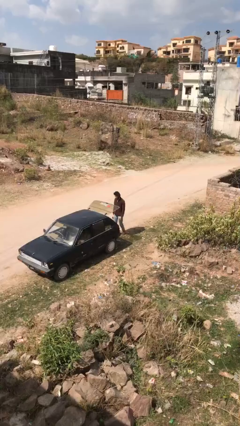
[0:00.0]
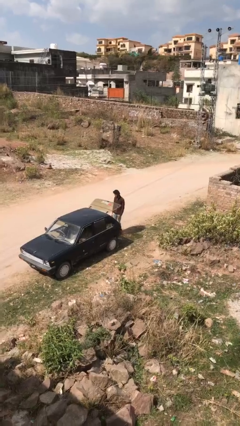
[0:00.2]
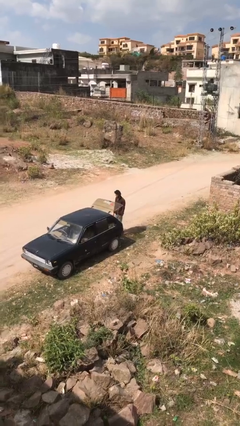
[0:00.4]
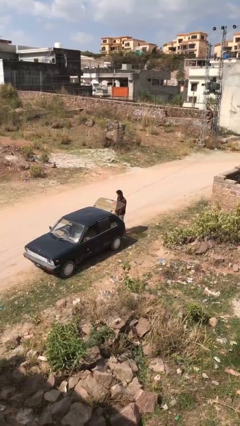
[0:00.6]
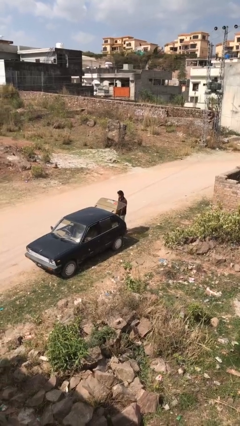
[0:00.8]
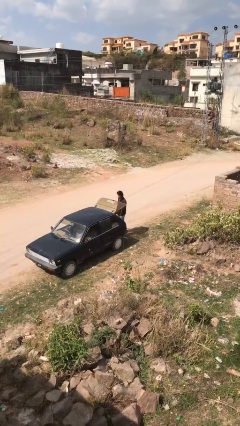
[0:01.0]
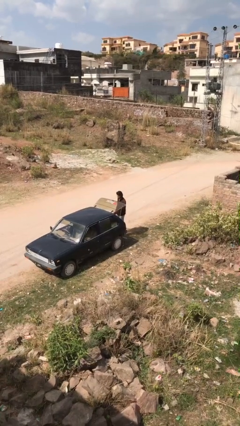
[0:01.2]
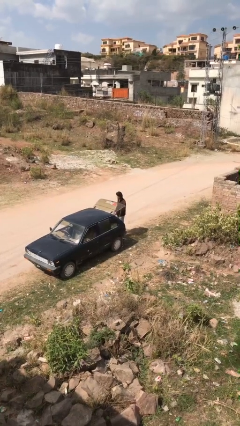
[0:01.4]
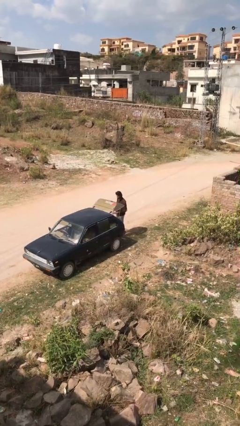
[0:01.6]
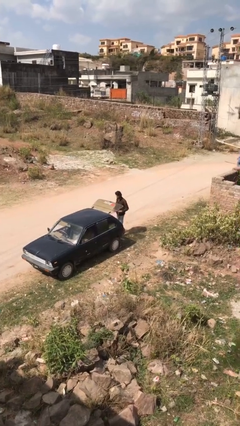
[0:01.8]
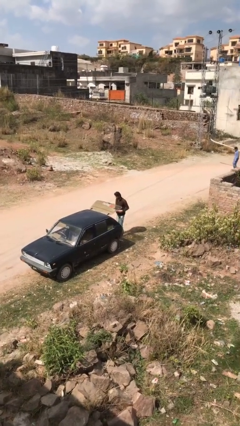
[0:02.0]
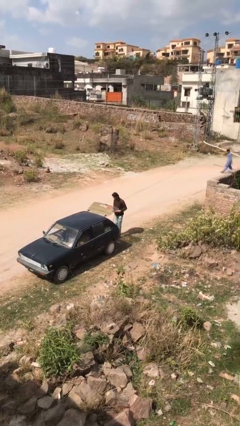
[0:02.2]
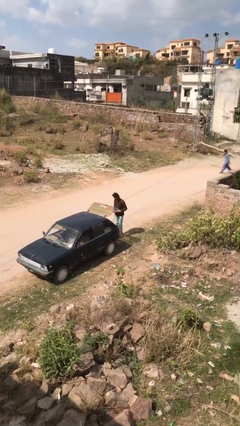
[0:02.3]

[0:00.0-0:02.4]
person unloads car

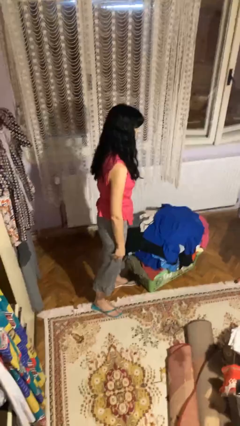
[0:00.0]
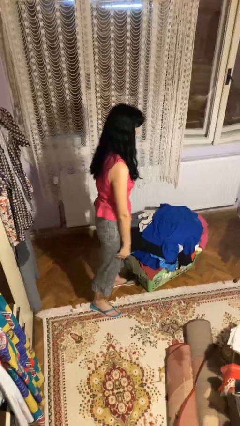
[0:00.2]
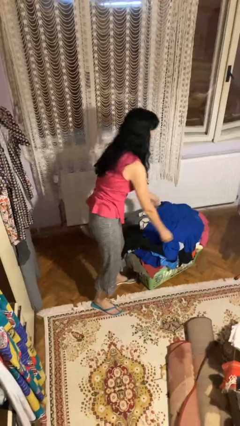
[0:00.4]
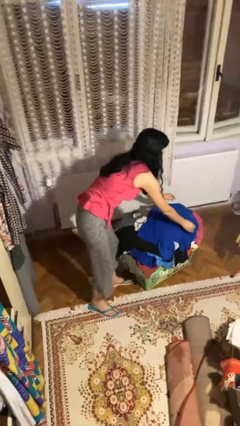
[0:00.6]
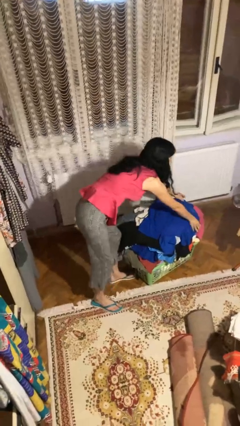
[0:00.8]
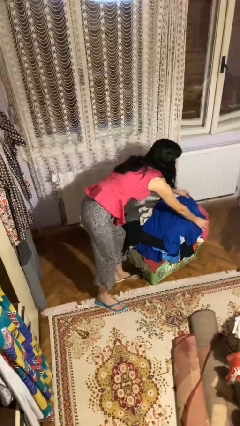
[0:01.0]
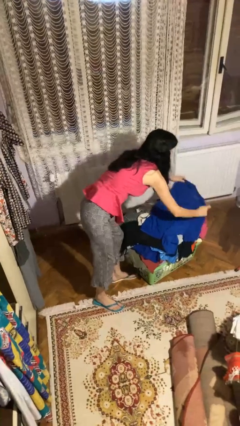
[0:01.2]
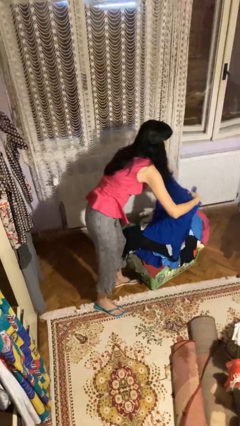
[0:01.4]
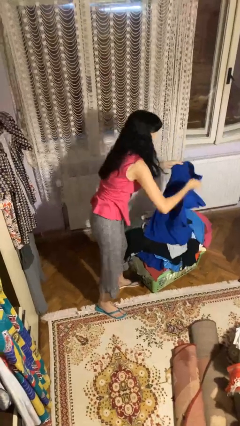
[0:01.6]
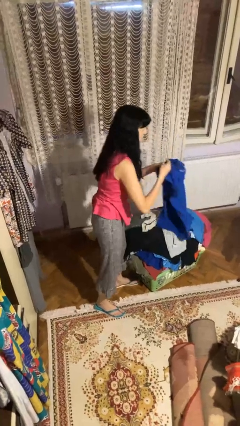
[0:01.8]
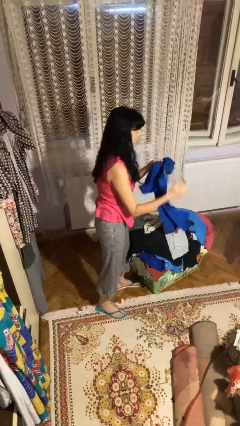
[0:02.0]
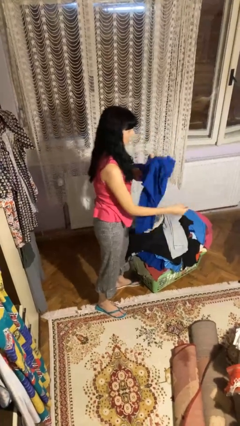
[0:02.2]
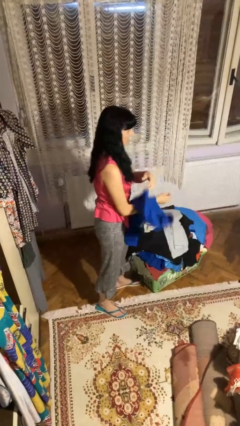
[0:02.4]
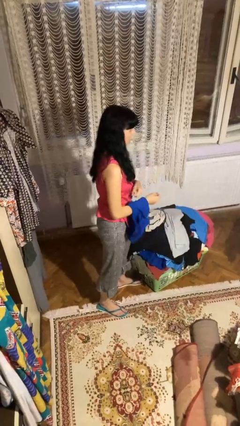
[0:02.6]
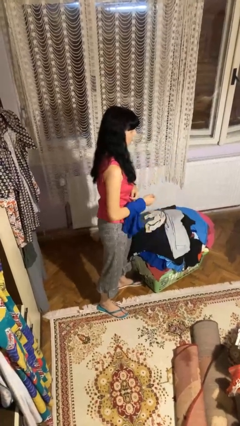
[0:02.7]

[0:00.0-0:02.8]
person folds shirt

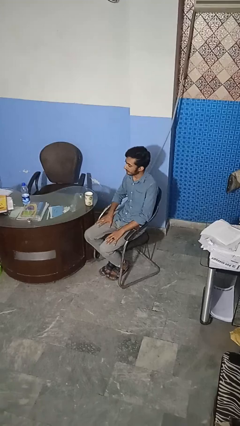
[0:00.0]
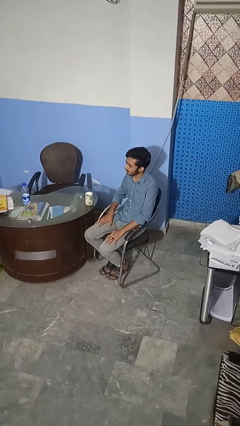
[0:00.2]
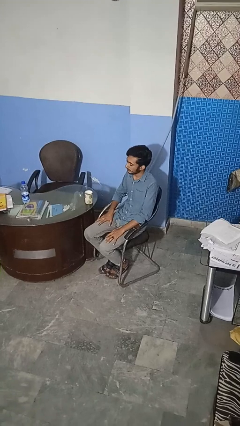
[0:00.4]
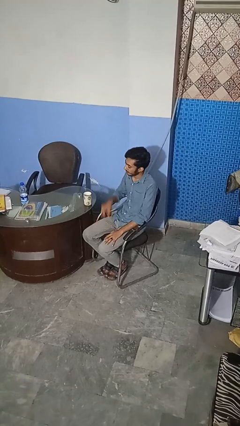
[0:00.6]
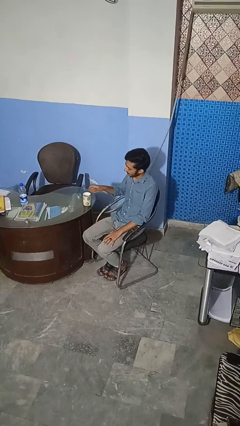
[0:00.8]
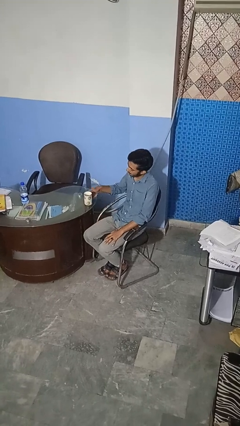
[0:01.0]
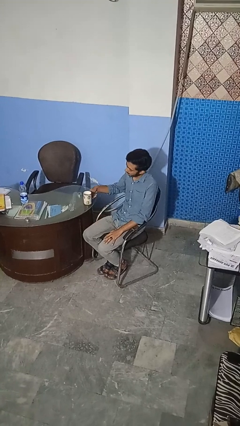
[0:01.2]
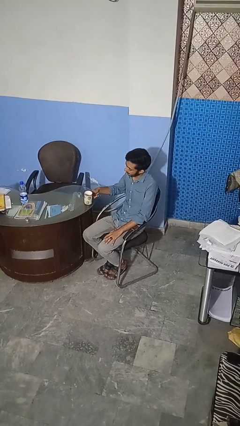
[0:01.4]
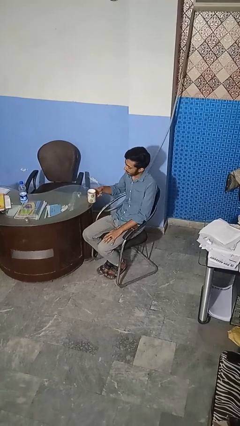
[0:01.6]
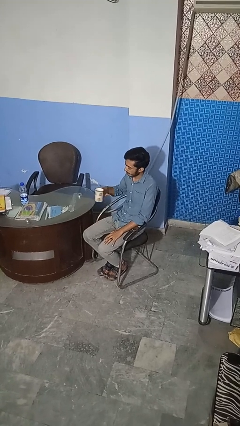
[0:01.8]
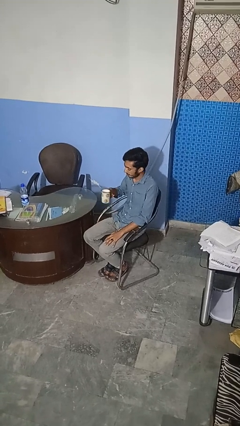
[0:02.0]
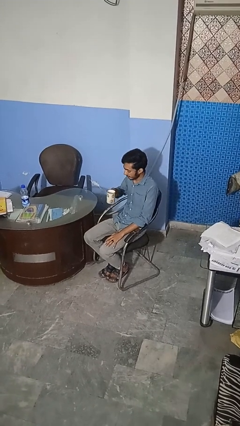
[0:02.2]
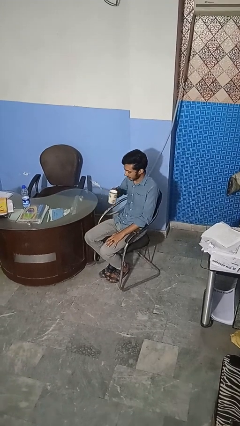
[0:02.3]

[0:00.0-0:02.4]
person picks up object from table

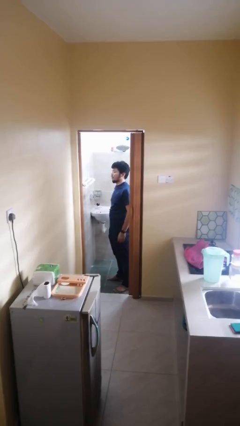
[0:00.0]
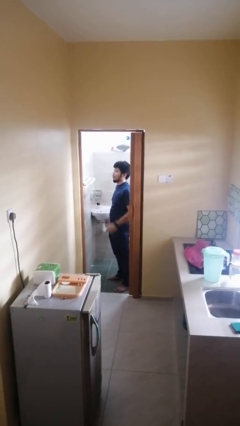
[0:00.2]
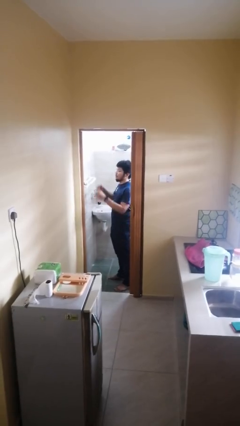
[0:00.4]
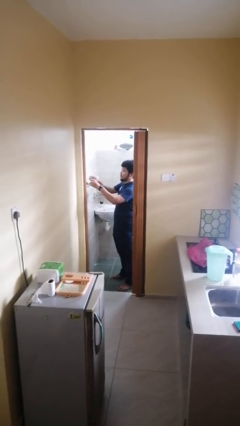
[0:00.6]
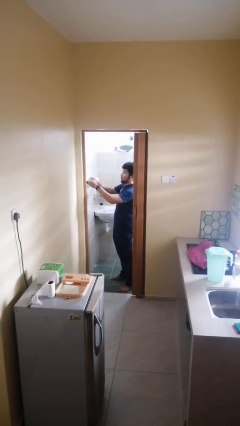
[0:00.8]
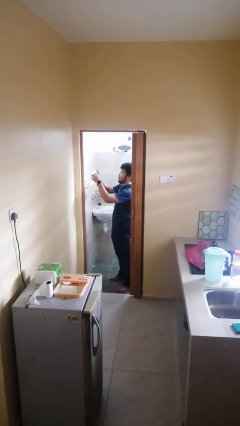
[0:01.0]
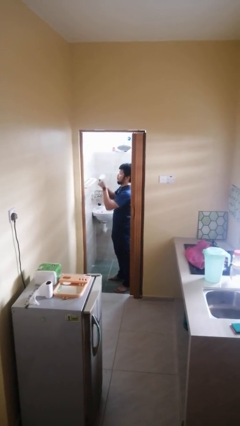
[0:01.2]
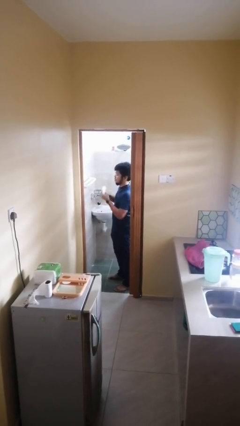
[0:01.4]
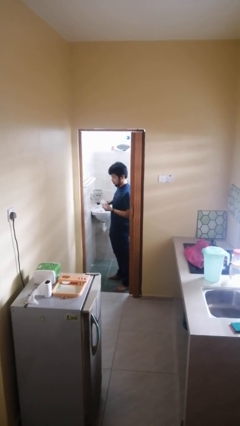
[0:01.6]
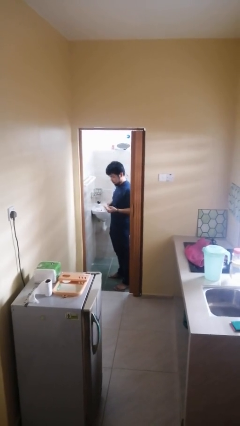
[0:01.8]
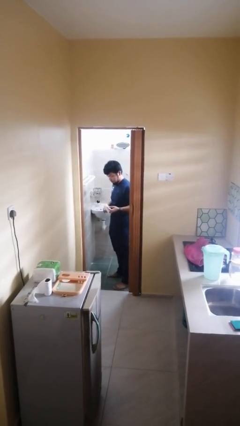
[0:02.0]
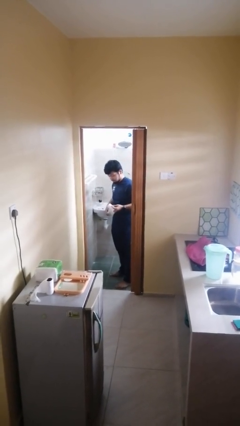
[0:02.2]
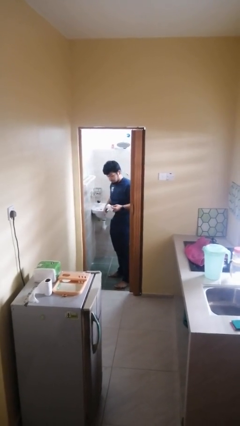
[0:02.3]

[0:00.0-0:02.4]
person picks up object from countertop

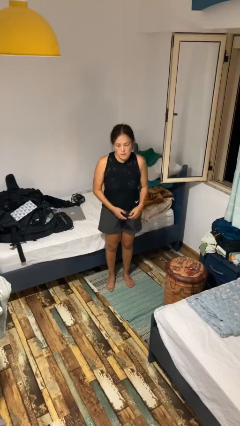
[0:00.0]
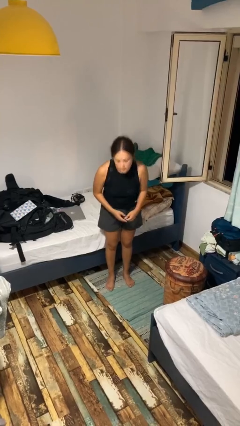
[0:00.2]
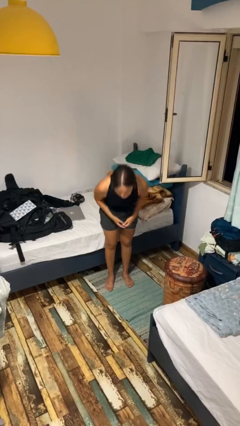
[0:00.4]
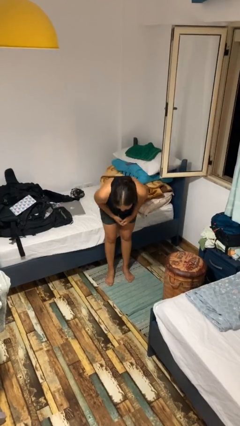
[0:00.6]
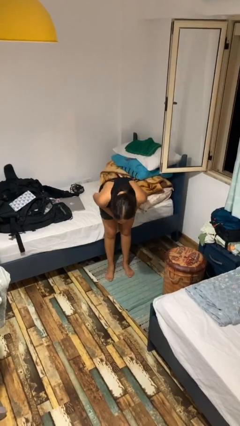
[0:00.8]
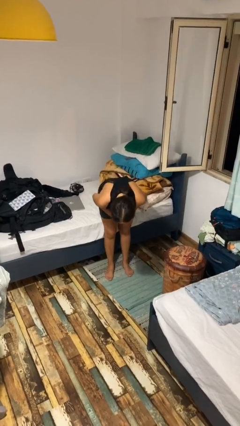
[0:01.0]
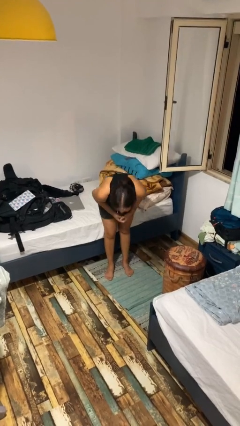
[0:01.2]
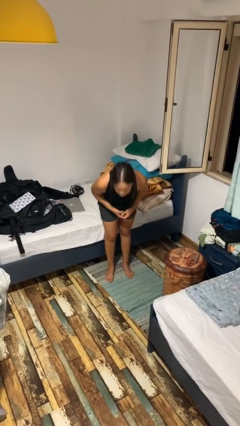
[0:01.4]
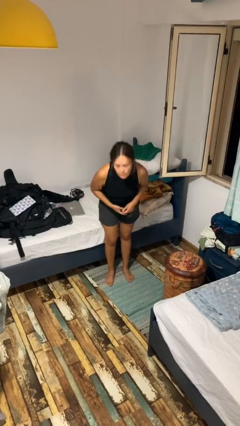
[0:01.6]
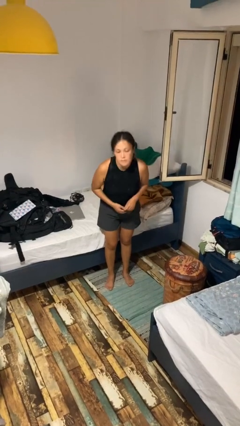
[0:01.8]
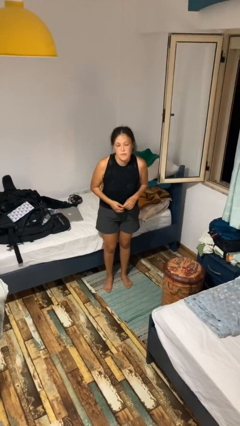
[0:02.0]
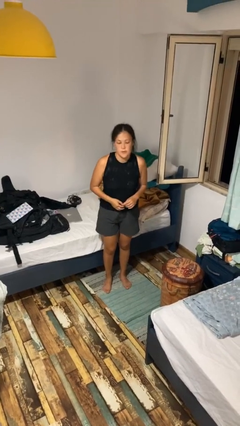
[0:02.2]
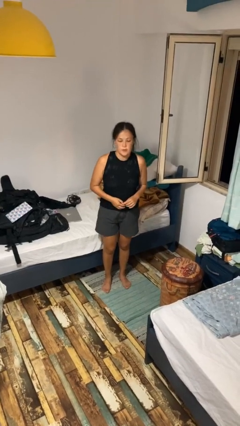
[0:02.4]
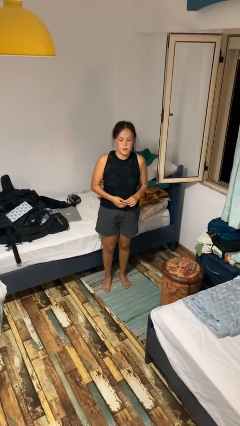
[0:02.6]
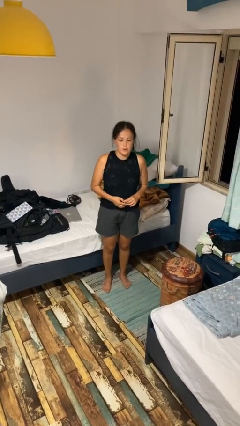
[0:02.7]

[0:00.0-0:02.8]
person bows

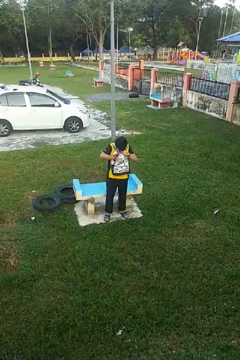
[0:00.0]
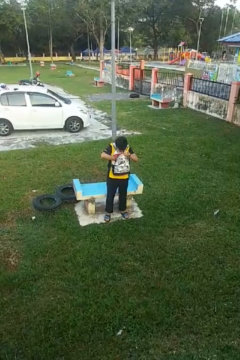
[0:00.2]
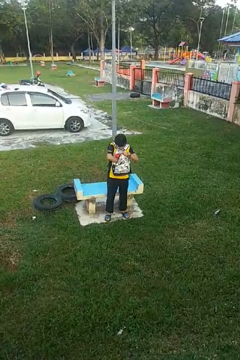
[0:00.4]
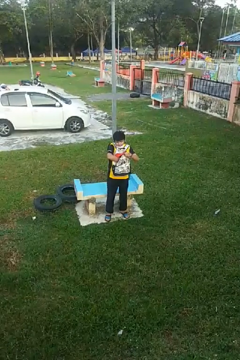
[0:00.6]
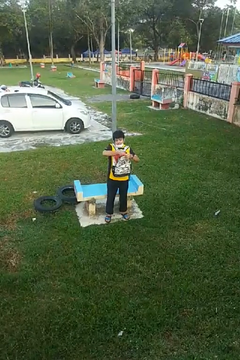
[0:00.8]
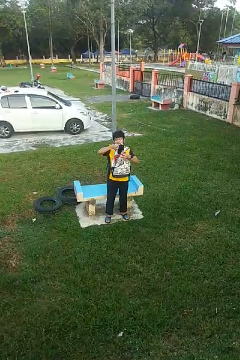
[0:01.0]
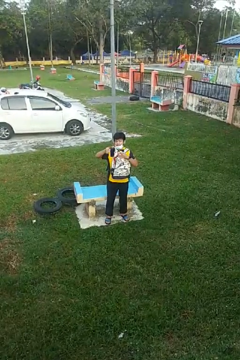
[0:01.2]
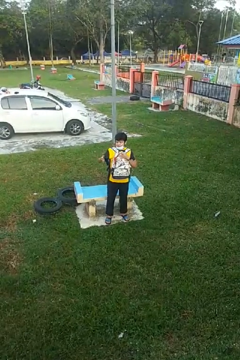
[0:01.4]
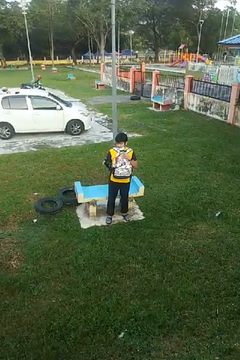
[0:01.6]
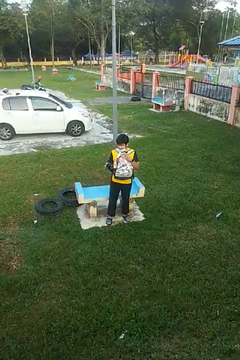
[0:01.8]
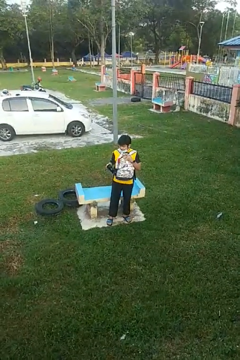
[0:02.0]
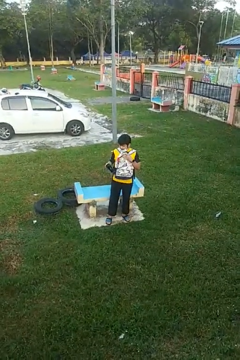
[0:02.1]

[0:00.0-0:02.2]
person takes object from backpack

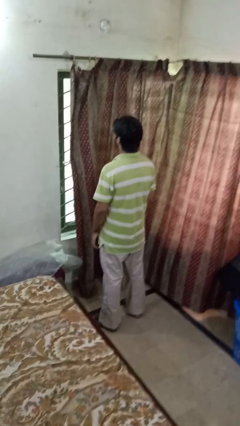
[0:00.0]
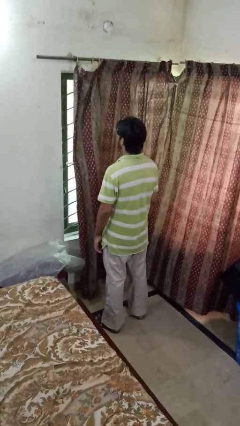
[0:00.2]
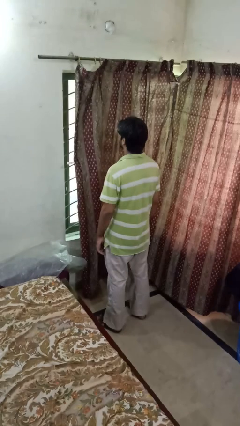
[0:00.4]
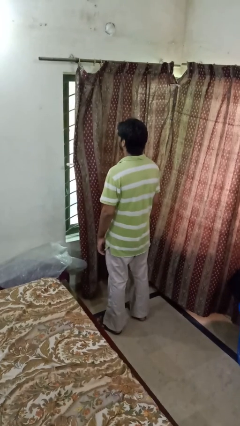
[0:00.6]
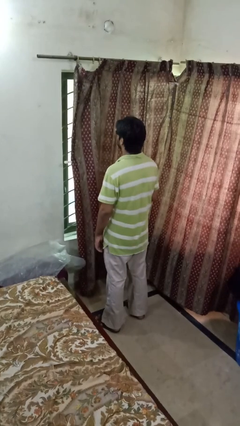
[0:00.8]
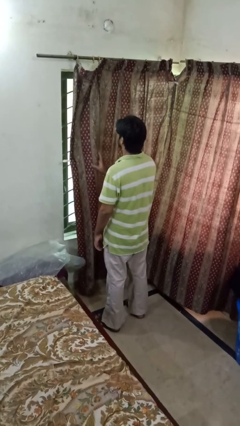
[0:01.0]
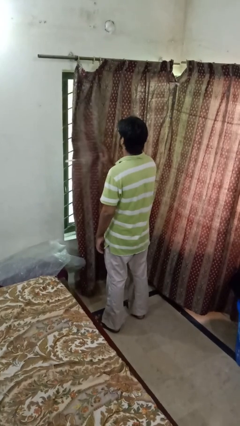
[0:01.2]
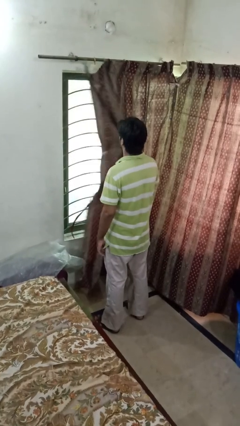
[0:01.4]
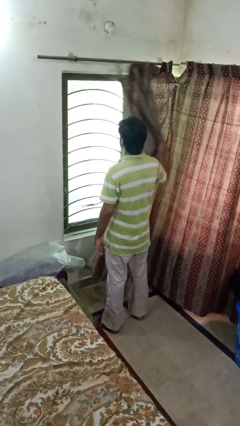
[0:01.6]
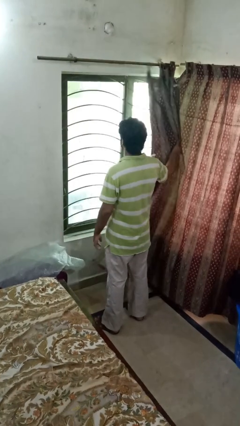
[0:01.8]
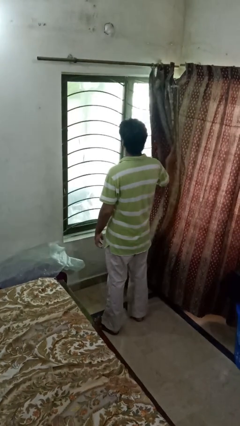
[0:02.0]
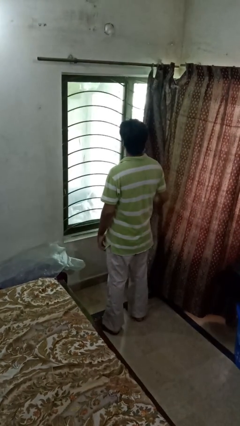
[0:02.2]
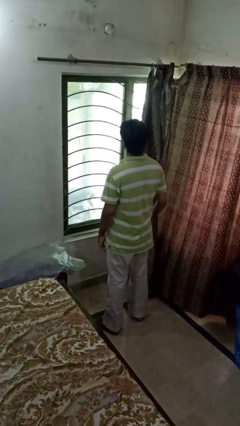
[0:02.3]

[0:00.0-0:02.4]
person opens curtains

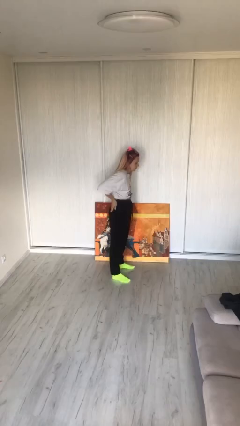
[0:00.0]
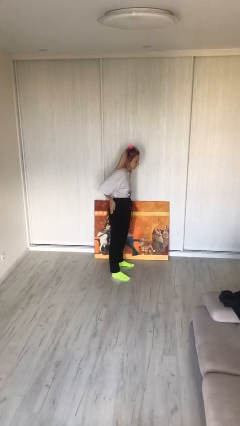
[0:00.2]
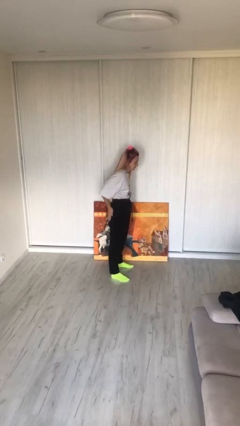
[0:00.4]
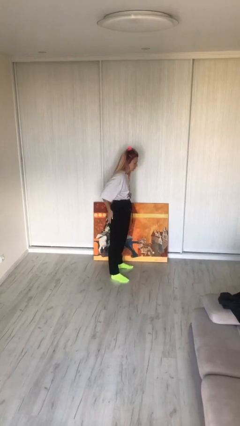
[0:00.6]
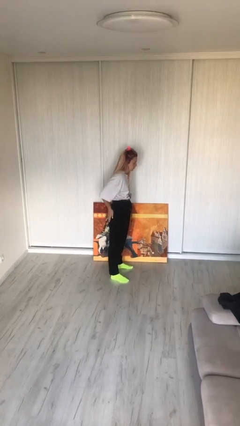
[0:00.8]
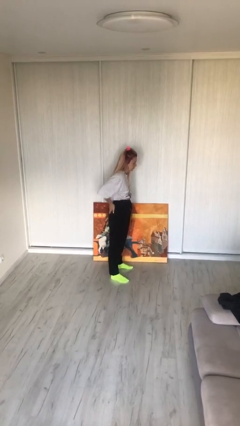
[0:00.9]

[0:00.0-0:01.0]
person puts hands in back pockets
